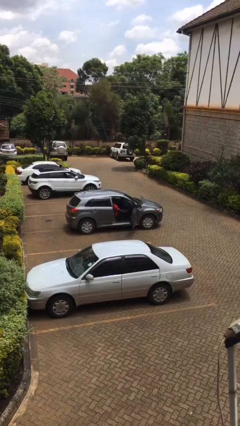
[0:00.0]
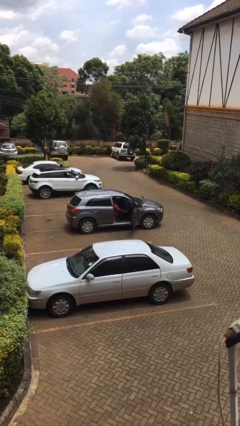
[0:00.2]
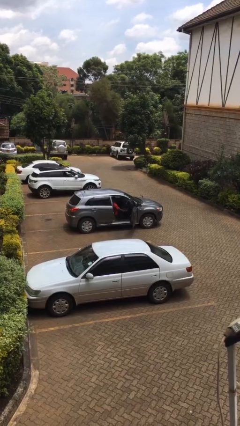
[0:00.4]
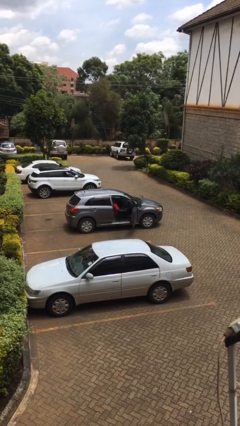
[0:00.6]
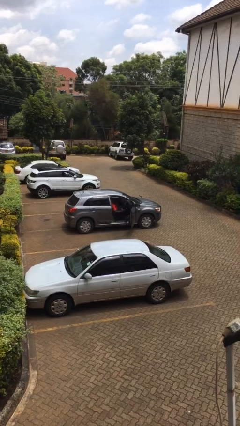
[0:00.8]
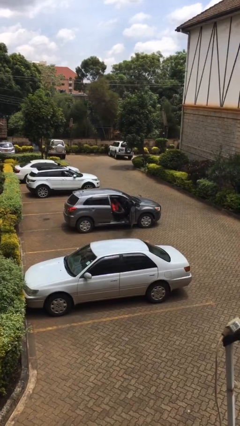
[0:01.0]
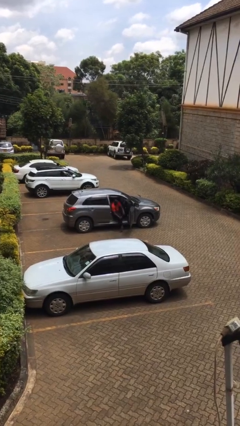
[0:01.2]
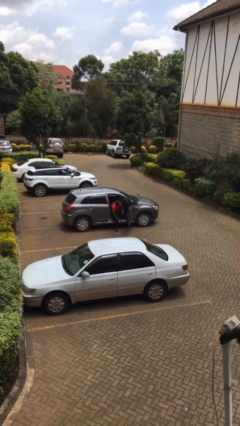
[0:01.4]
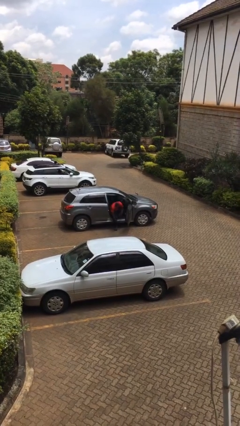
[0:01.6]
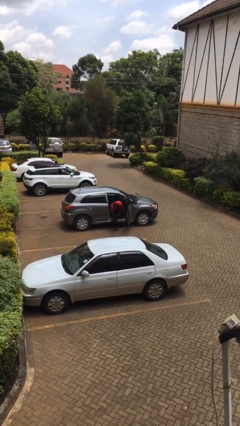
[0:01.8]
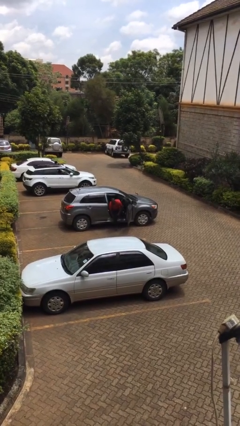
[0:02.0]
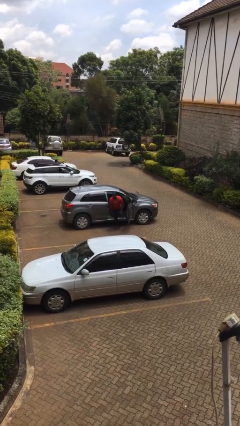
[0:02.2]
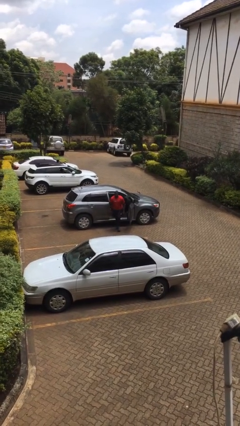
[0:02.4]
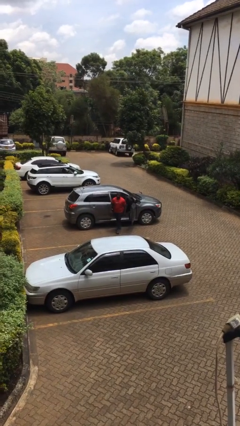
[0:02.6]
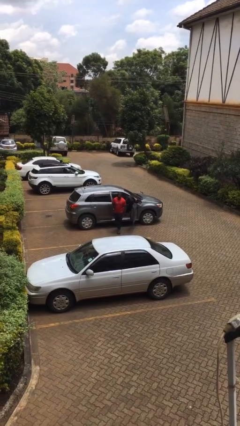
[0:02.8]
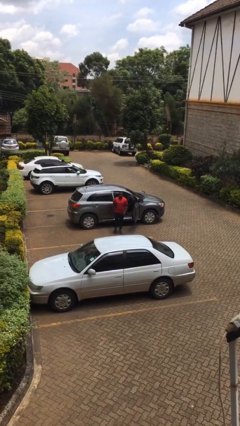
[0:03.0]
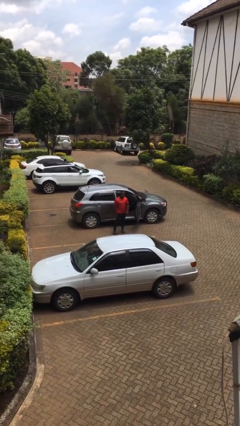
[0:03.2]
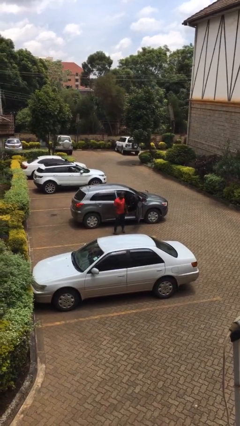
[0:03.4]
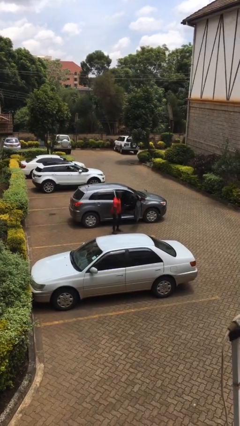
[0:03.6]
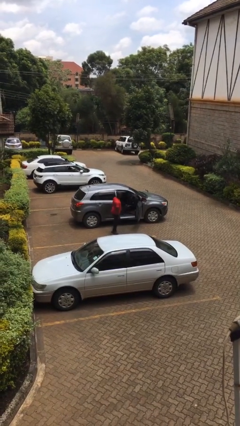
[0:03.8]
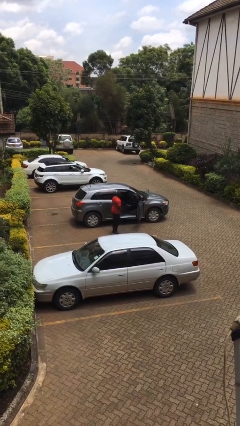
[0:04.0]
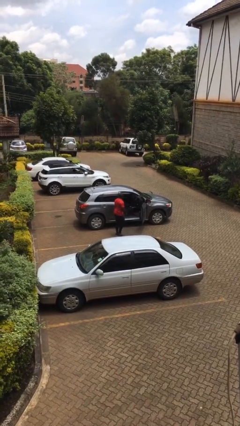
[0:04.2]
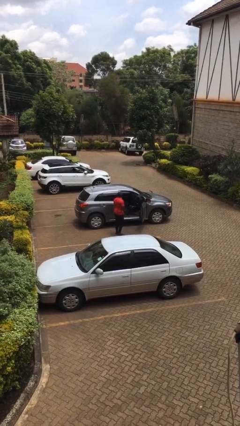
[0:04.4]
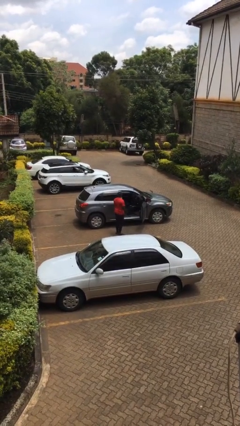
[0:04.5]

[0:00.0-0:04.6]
person exits car

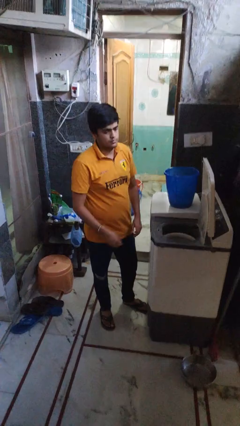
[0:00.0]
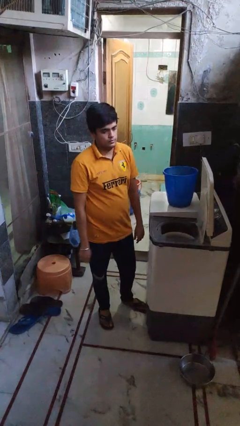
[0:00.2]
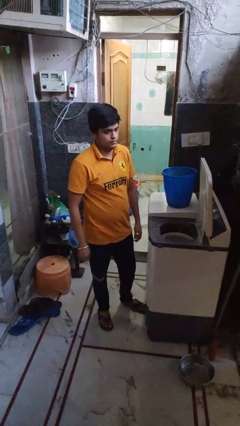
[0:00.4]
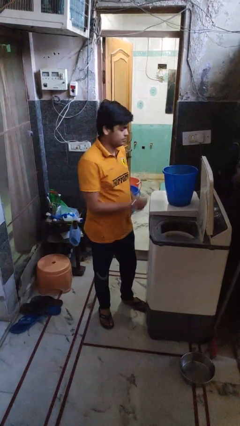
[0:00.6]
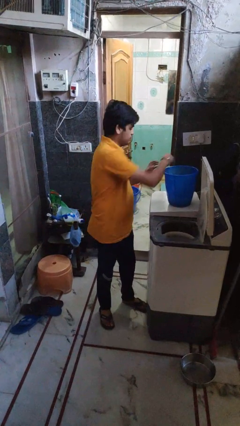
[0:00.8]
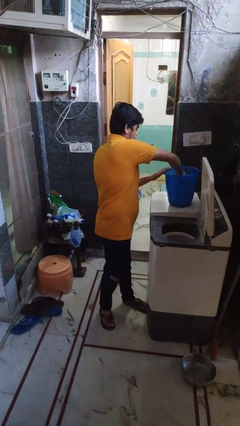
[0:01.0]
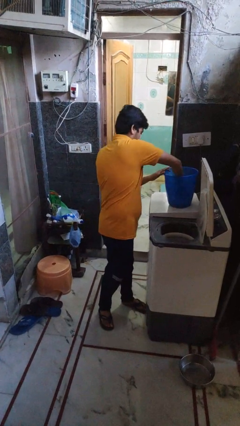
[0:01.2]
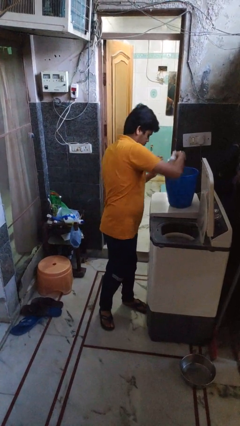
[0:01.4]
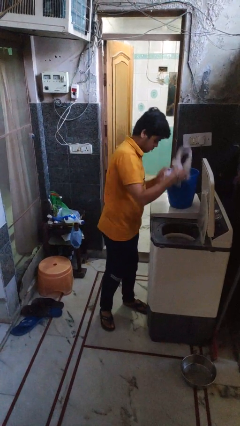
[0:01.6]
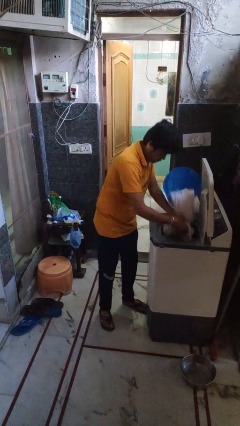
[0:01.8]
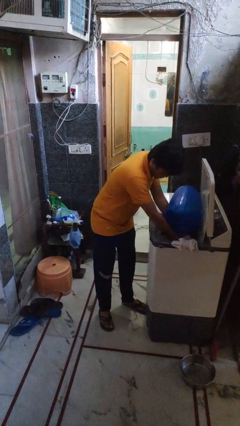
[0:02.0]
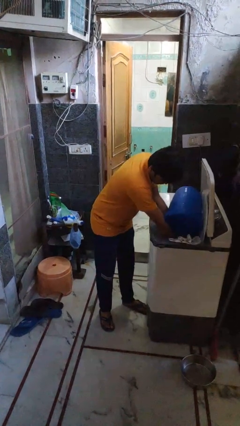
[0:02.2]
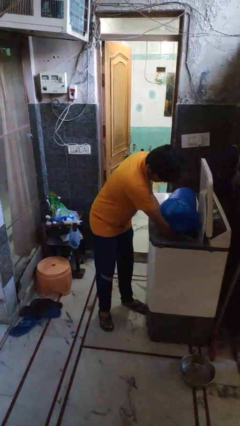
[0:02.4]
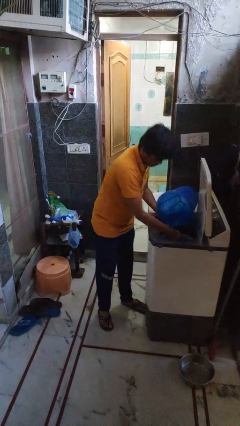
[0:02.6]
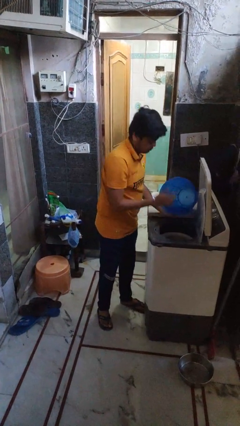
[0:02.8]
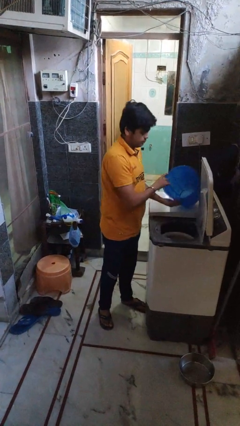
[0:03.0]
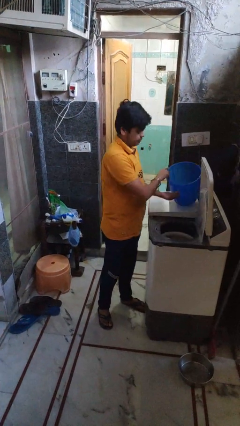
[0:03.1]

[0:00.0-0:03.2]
person loads clotheswasher

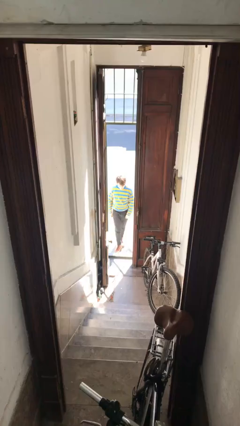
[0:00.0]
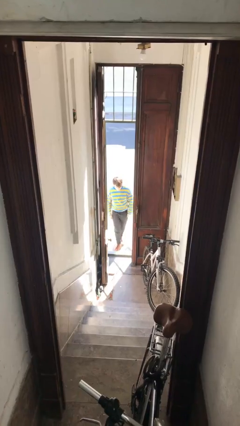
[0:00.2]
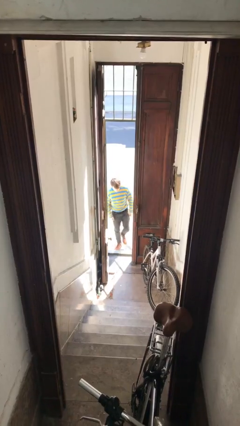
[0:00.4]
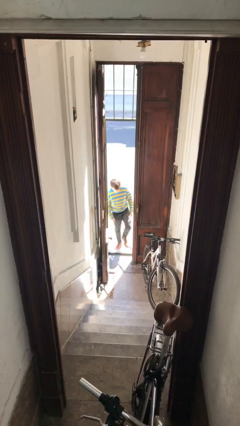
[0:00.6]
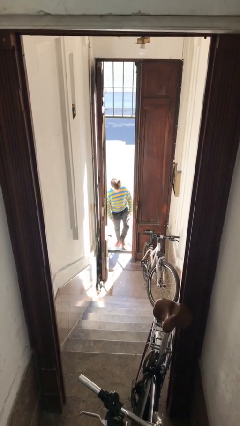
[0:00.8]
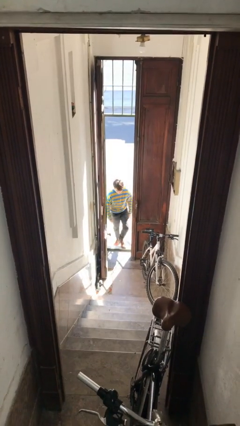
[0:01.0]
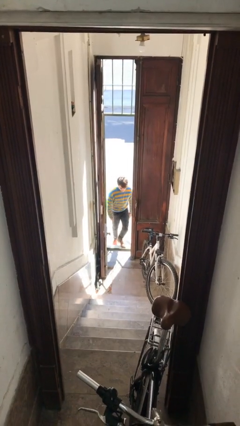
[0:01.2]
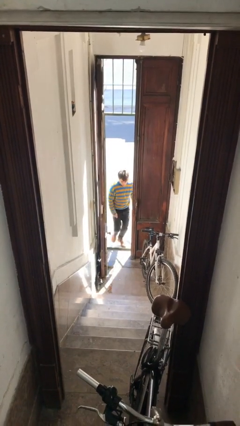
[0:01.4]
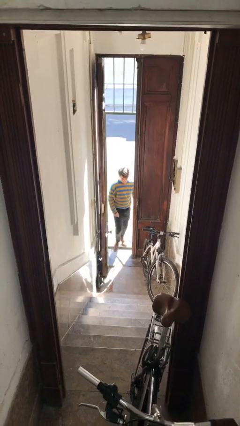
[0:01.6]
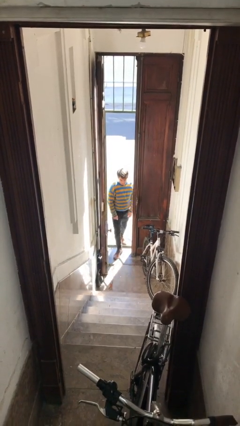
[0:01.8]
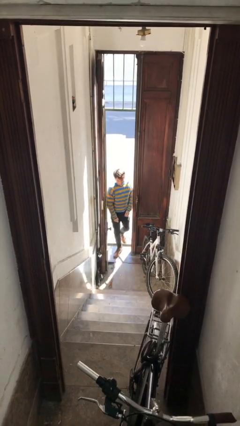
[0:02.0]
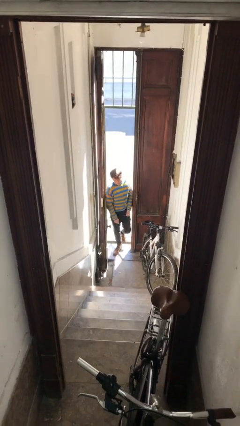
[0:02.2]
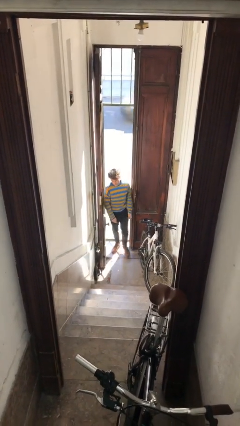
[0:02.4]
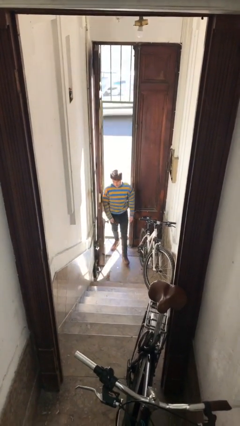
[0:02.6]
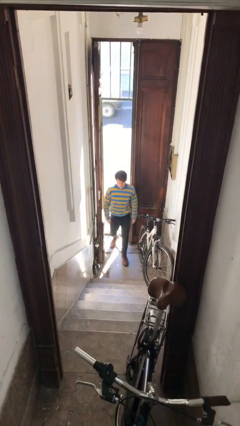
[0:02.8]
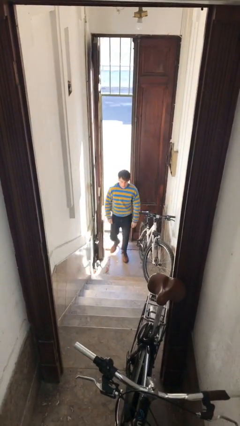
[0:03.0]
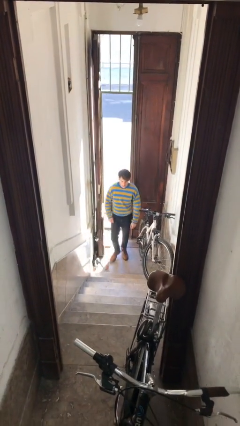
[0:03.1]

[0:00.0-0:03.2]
person enters scene through structure

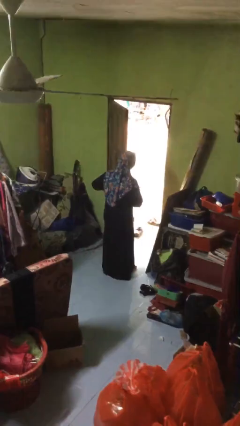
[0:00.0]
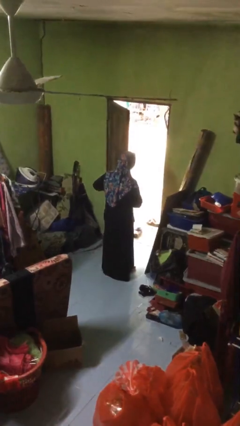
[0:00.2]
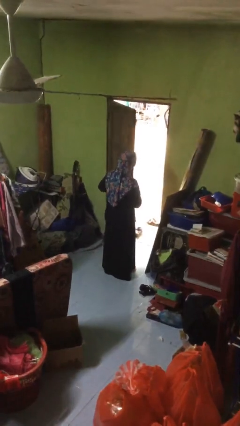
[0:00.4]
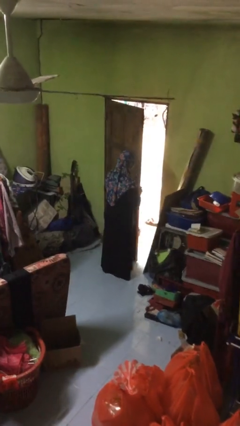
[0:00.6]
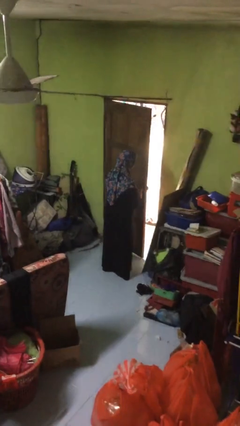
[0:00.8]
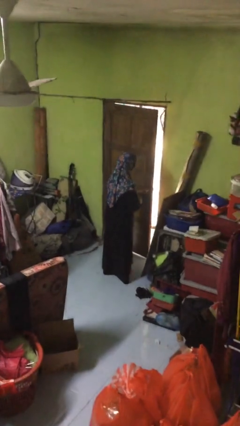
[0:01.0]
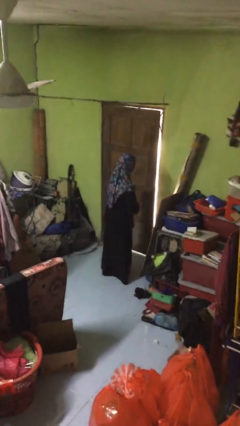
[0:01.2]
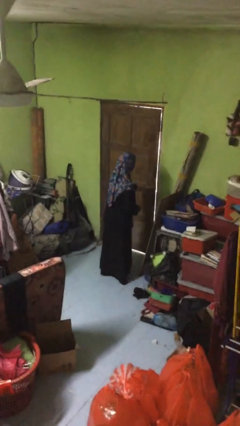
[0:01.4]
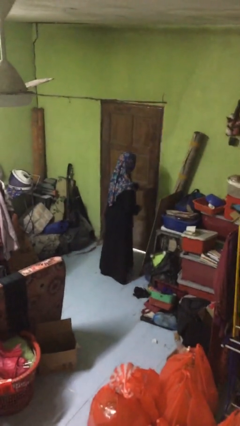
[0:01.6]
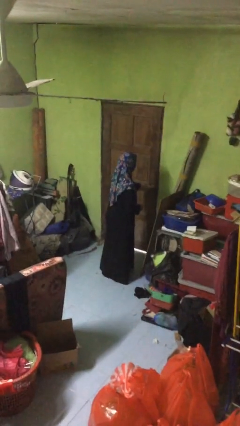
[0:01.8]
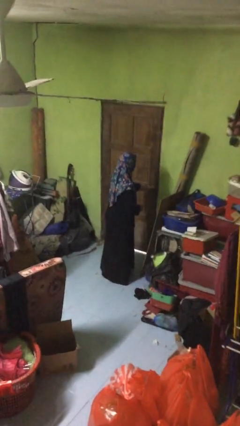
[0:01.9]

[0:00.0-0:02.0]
person closes facility door

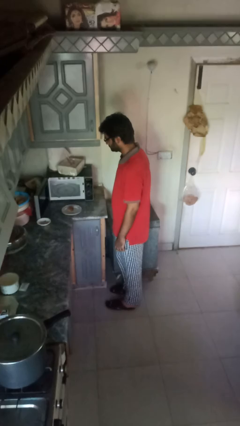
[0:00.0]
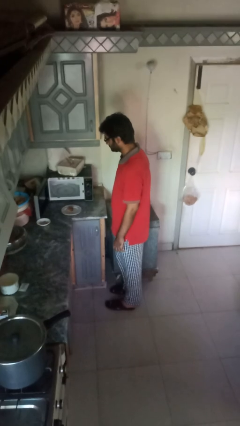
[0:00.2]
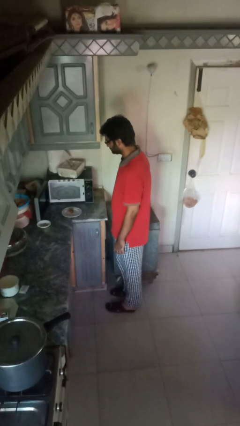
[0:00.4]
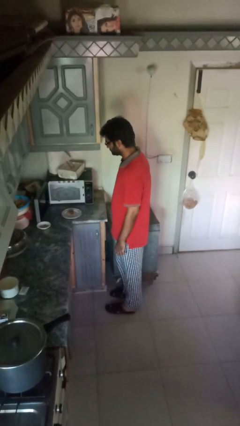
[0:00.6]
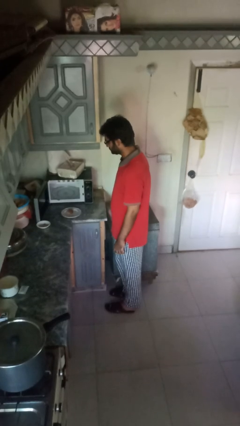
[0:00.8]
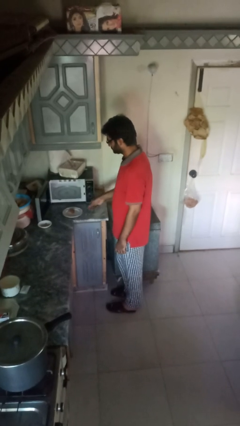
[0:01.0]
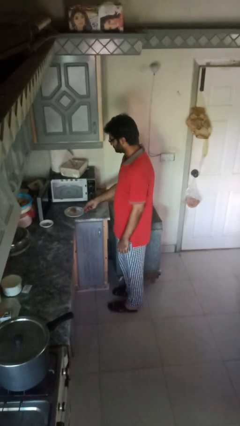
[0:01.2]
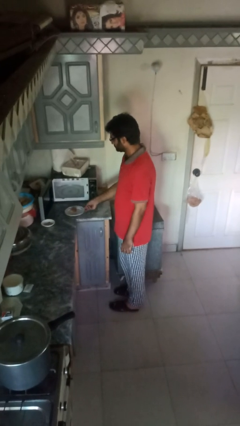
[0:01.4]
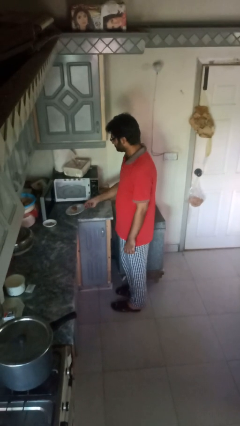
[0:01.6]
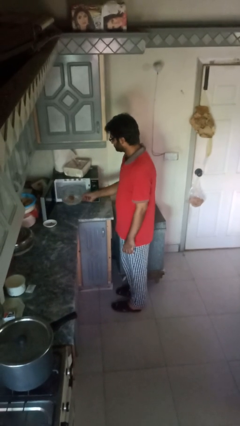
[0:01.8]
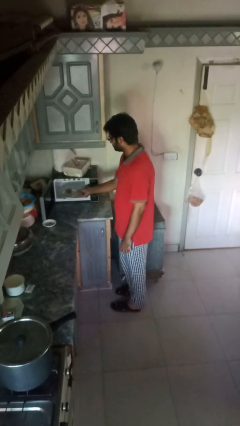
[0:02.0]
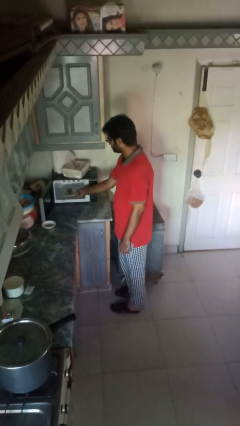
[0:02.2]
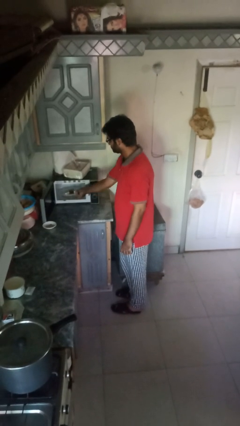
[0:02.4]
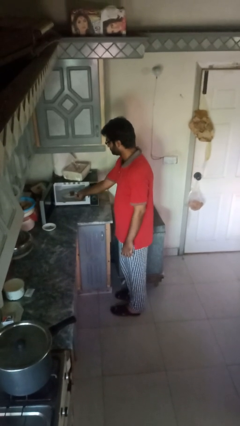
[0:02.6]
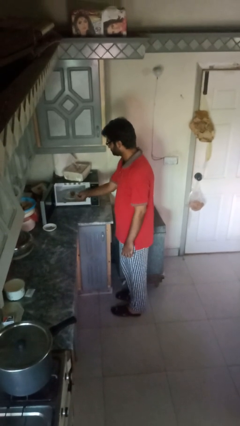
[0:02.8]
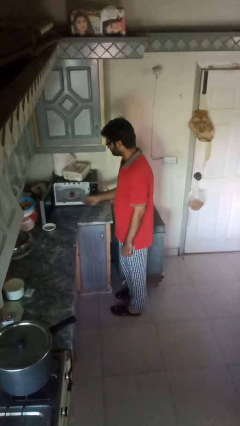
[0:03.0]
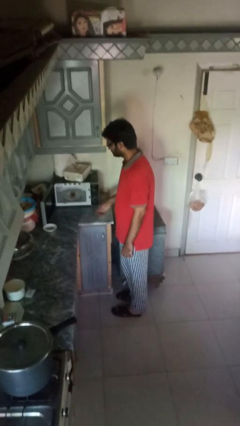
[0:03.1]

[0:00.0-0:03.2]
person puts object into oven

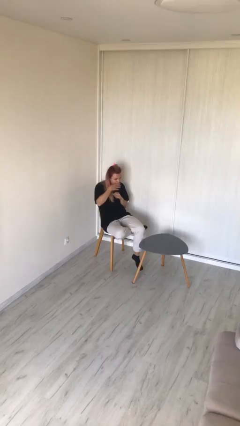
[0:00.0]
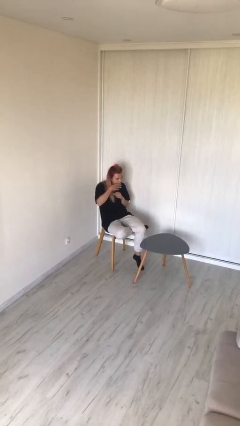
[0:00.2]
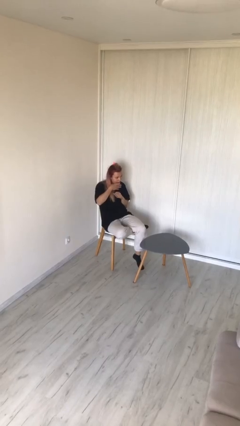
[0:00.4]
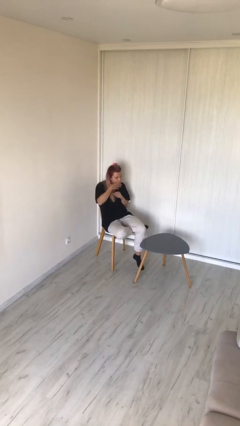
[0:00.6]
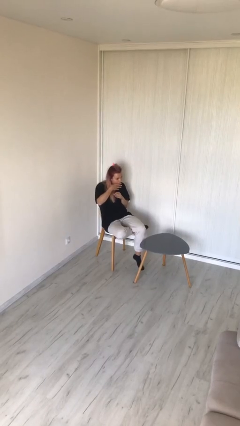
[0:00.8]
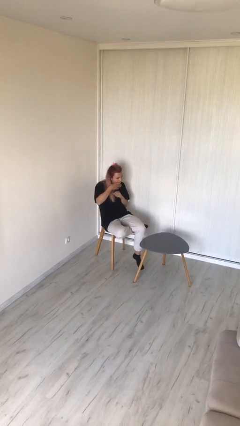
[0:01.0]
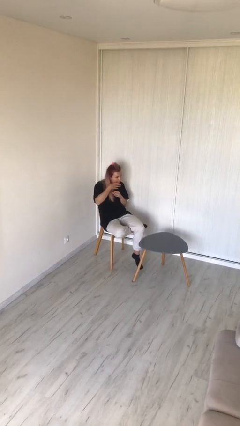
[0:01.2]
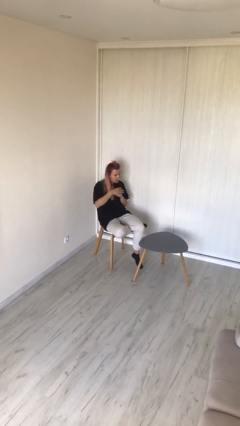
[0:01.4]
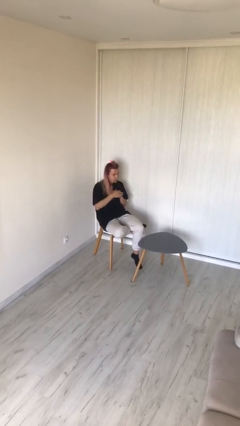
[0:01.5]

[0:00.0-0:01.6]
person licks fingers
